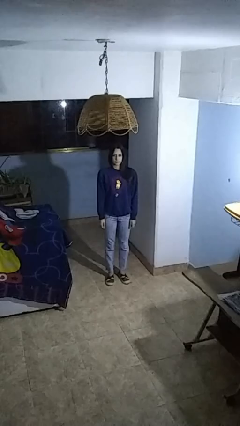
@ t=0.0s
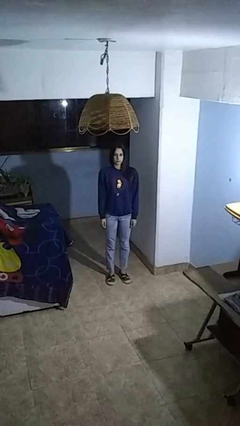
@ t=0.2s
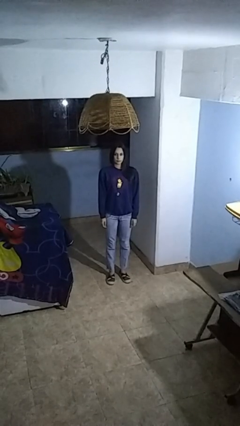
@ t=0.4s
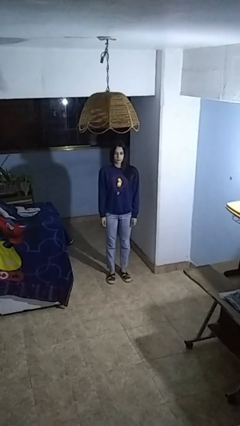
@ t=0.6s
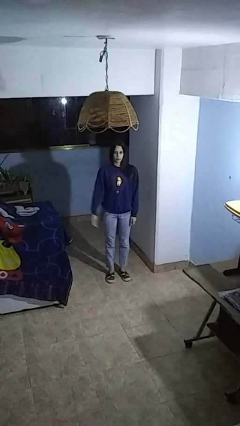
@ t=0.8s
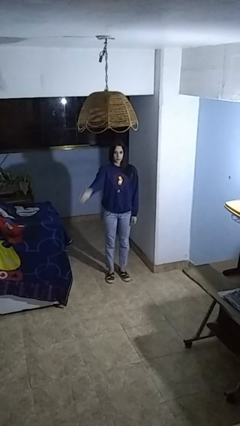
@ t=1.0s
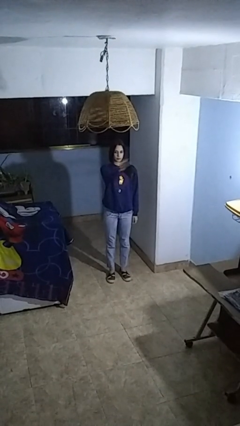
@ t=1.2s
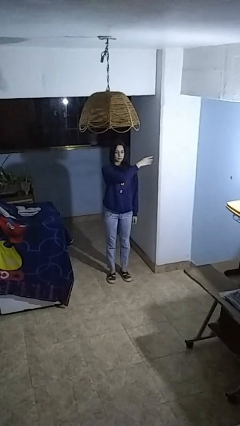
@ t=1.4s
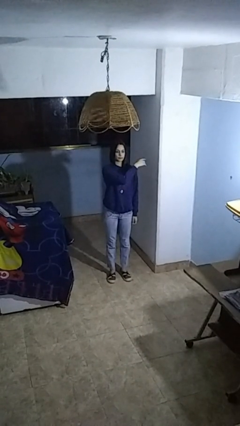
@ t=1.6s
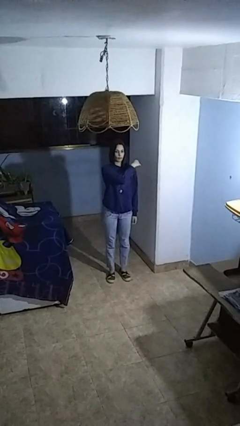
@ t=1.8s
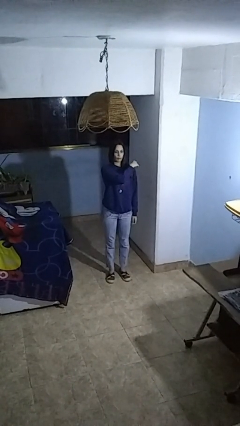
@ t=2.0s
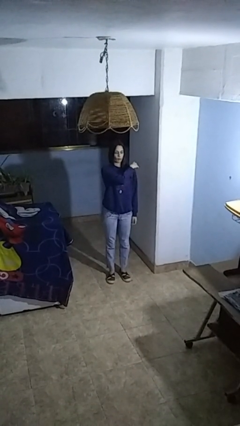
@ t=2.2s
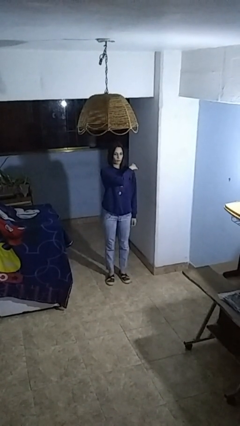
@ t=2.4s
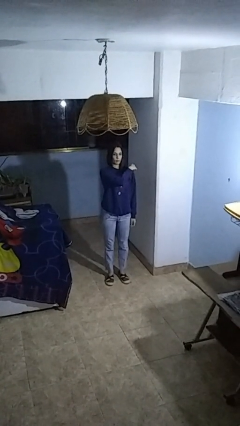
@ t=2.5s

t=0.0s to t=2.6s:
person gestures swipe left

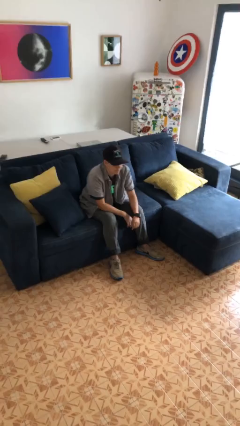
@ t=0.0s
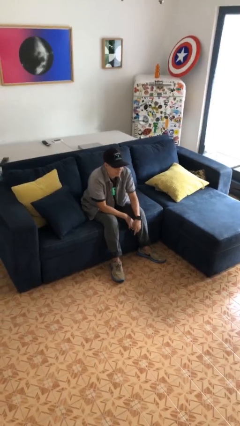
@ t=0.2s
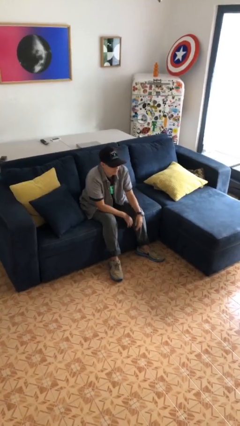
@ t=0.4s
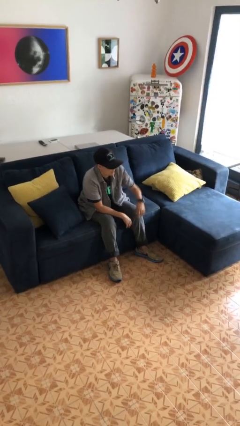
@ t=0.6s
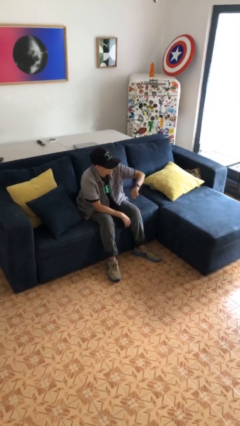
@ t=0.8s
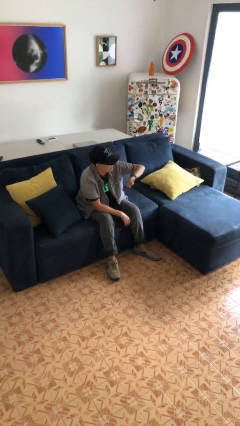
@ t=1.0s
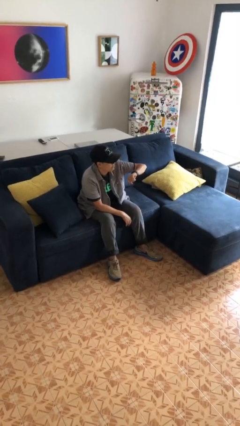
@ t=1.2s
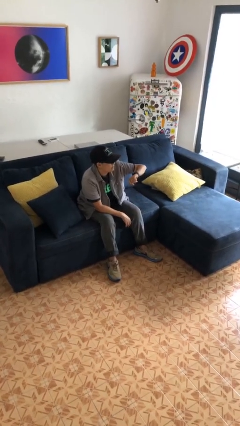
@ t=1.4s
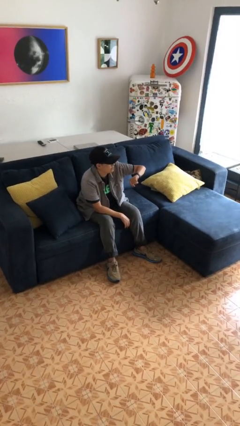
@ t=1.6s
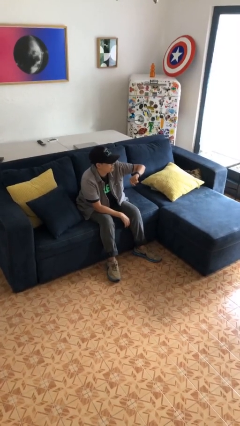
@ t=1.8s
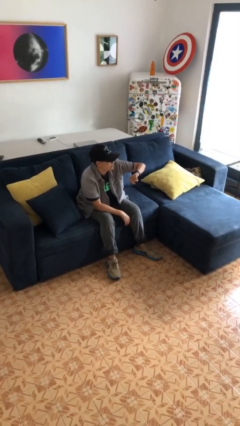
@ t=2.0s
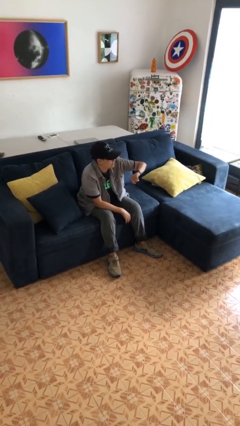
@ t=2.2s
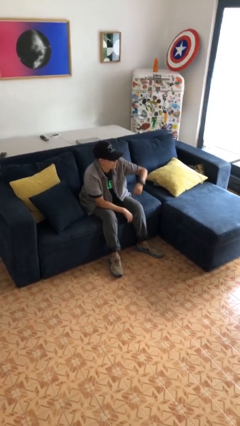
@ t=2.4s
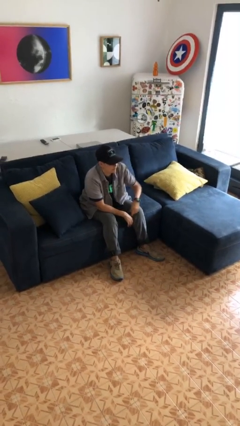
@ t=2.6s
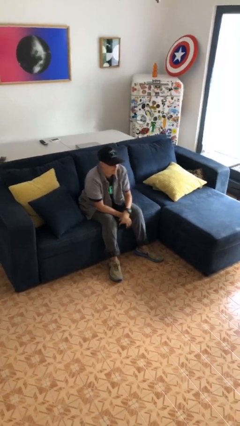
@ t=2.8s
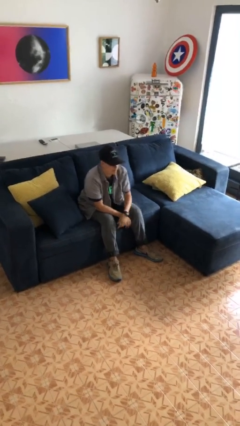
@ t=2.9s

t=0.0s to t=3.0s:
person looks at wristwatch

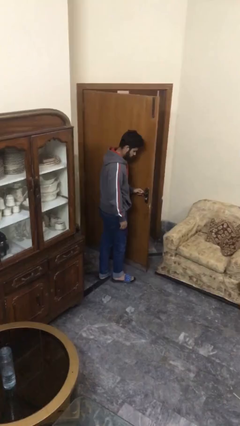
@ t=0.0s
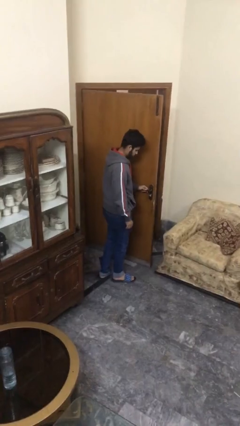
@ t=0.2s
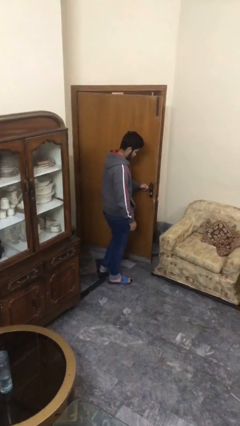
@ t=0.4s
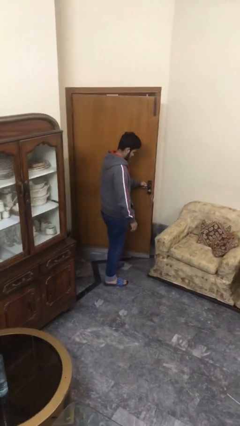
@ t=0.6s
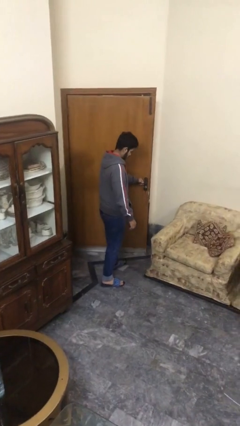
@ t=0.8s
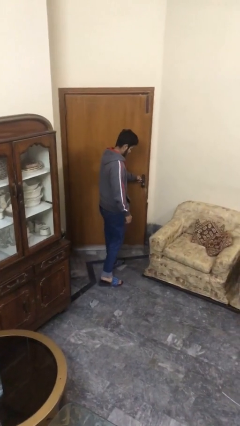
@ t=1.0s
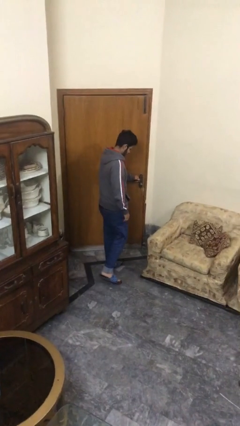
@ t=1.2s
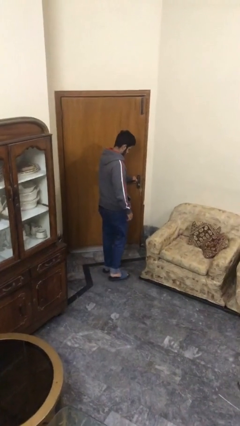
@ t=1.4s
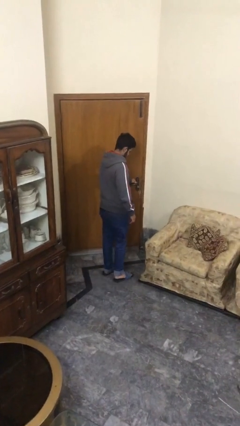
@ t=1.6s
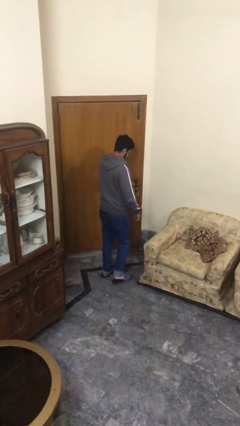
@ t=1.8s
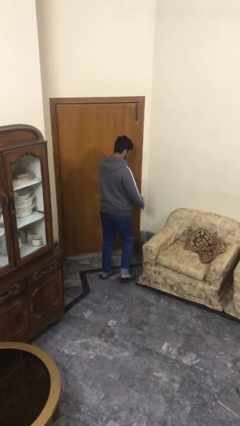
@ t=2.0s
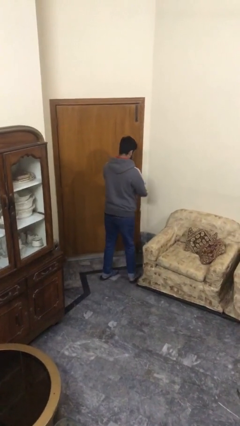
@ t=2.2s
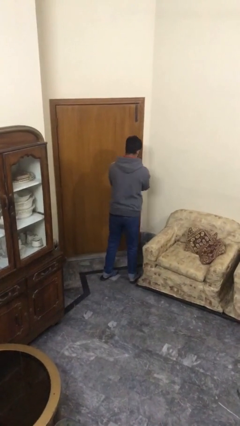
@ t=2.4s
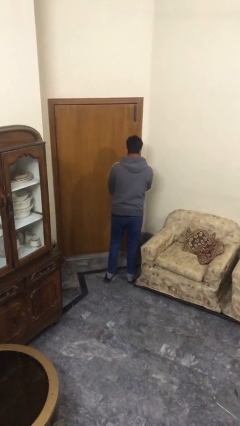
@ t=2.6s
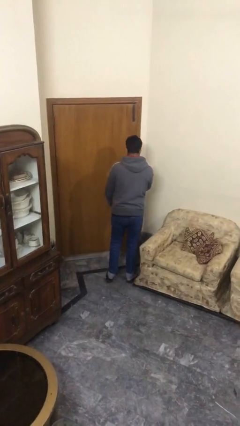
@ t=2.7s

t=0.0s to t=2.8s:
person closes facility door

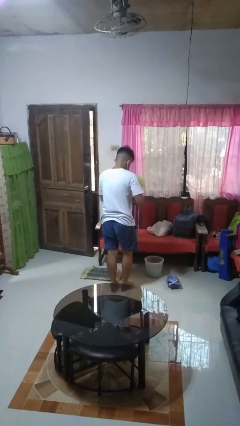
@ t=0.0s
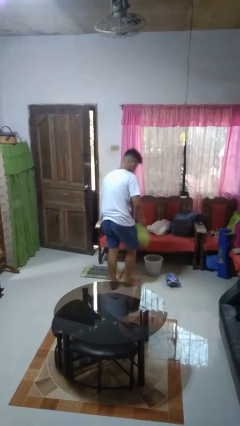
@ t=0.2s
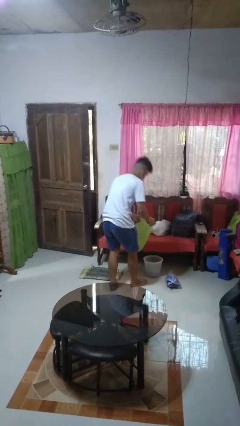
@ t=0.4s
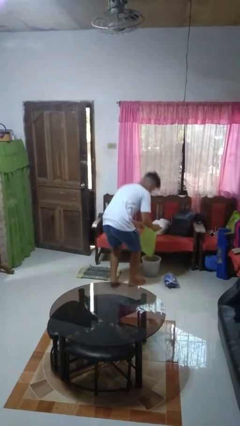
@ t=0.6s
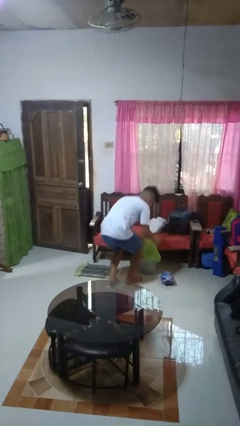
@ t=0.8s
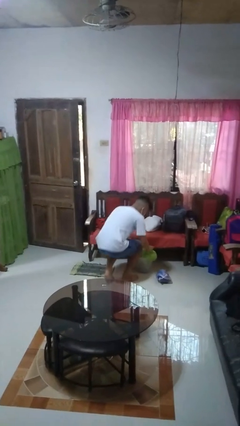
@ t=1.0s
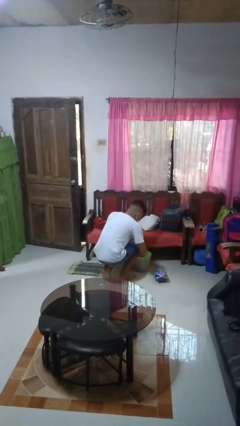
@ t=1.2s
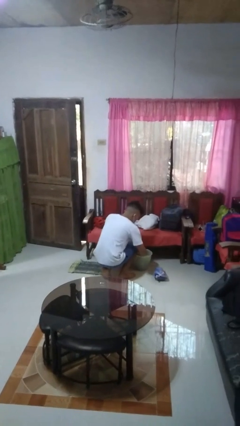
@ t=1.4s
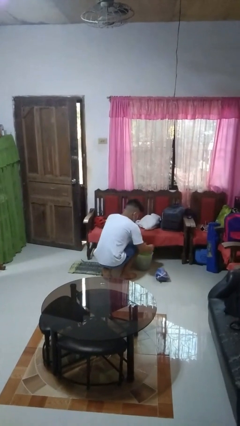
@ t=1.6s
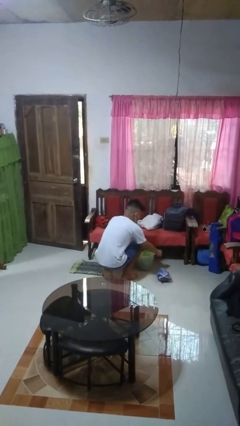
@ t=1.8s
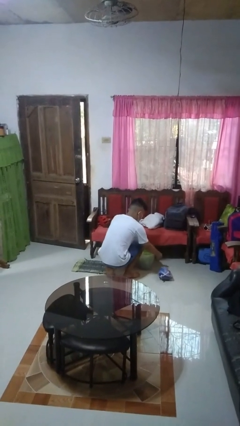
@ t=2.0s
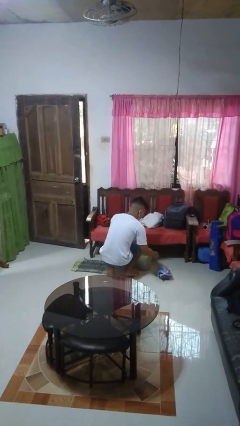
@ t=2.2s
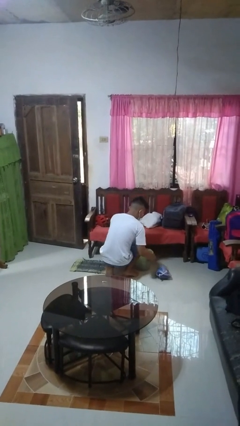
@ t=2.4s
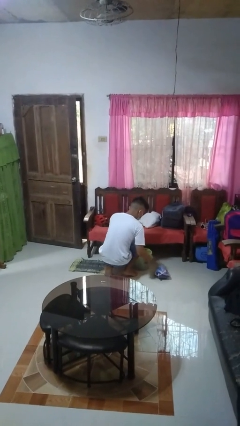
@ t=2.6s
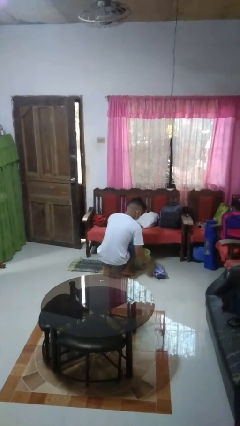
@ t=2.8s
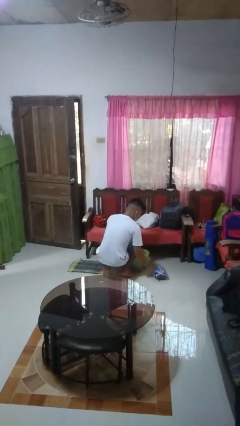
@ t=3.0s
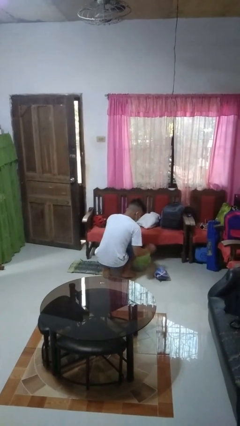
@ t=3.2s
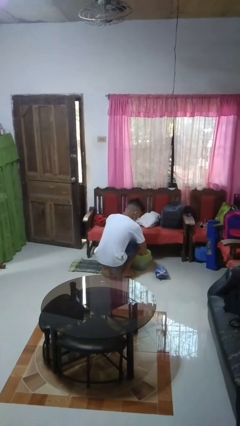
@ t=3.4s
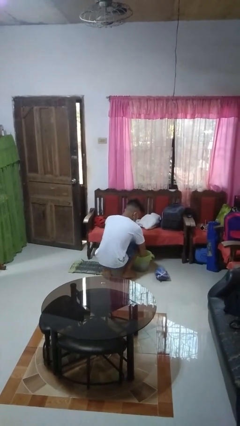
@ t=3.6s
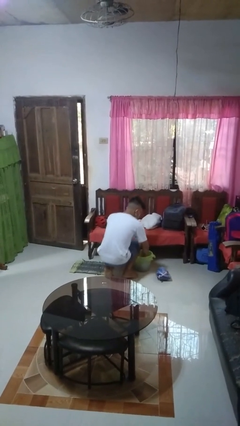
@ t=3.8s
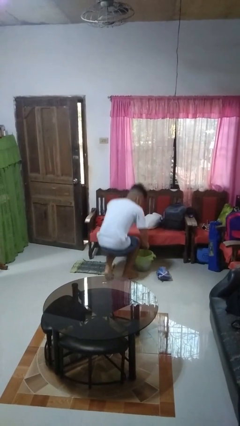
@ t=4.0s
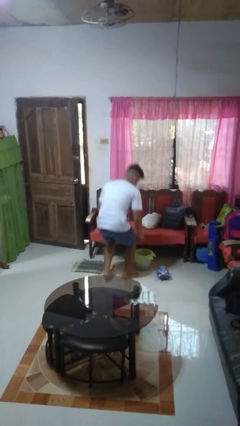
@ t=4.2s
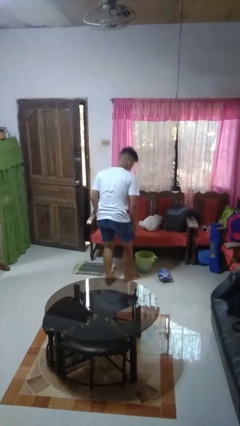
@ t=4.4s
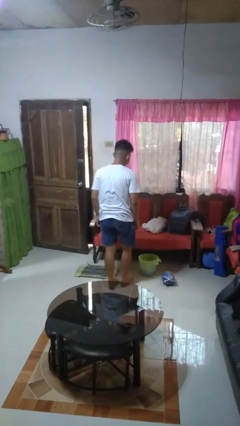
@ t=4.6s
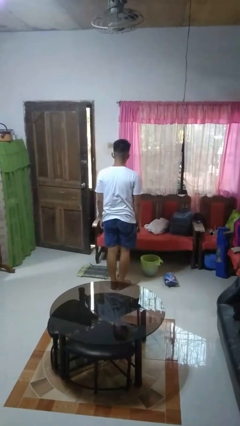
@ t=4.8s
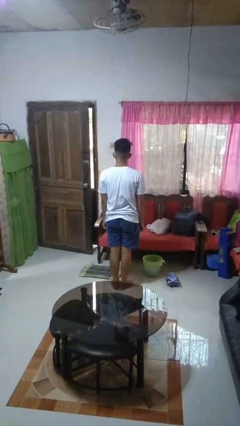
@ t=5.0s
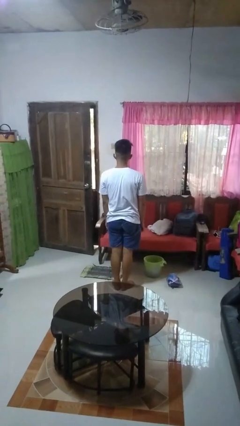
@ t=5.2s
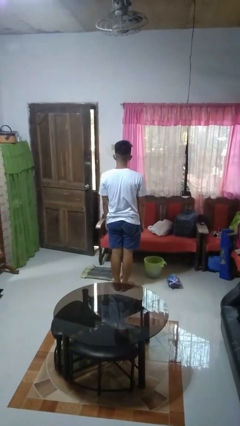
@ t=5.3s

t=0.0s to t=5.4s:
person inserts trashbag into trashcan

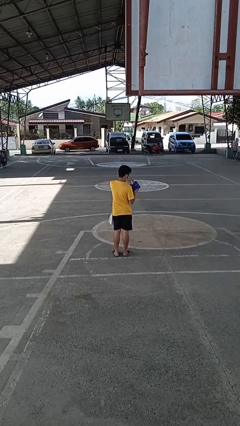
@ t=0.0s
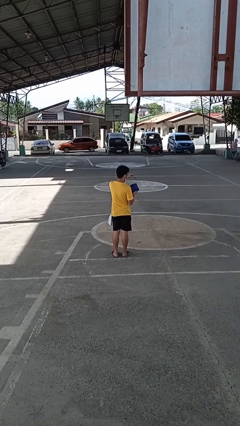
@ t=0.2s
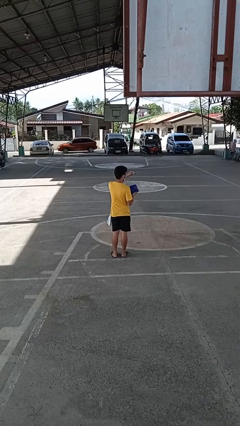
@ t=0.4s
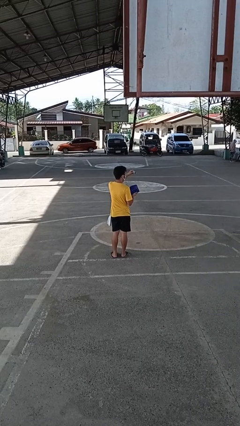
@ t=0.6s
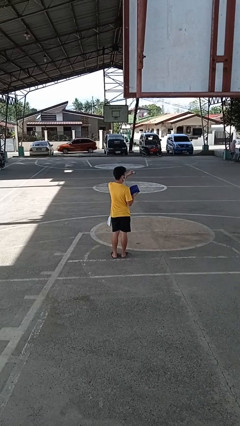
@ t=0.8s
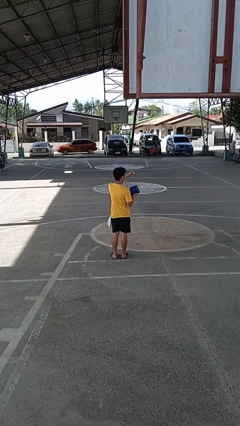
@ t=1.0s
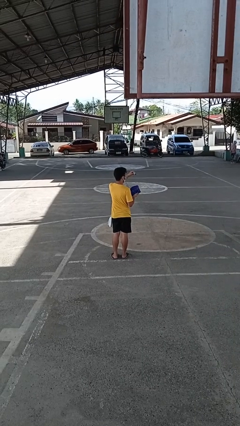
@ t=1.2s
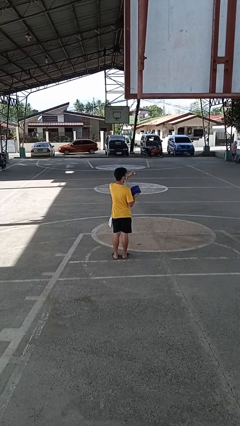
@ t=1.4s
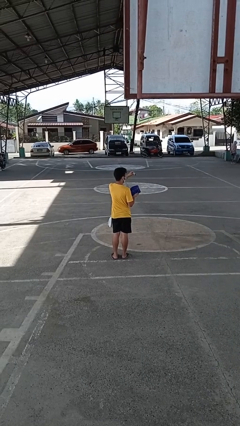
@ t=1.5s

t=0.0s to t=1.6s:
person takes object from purse

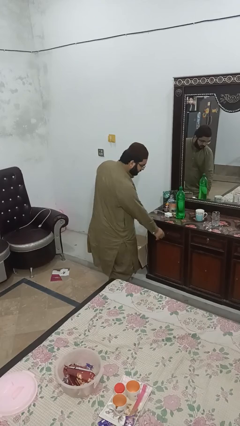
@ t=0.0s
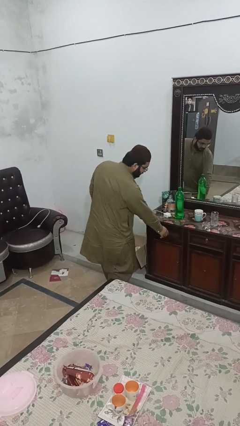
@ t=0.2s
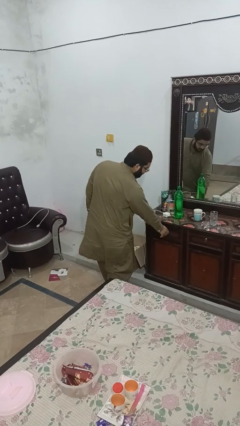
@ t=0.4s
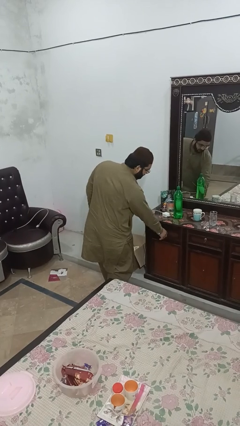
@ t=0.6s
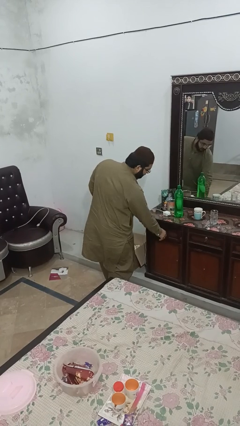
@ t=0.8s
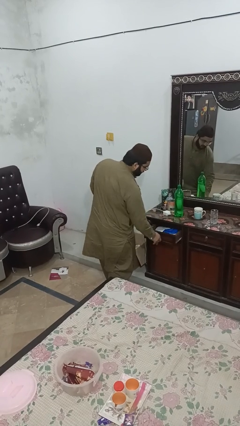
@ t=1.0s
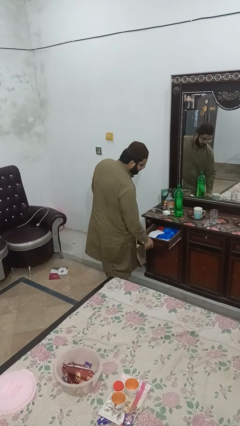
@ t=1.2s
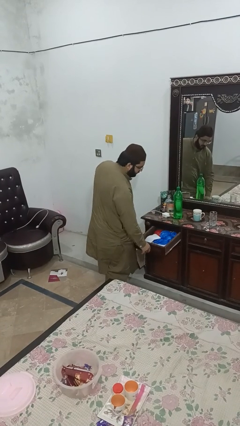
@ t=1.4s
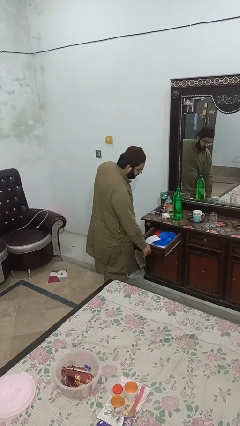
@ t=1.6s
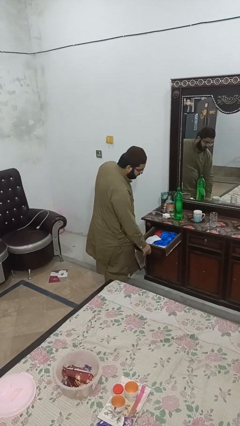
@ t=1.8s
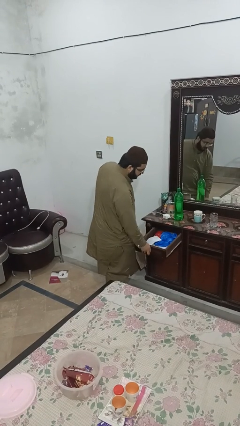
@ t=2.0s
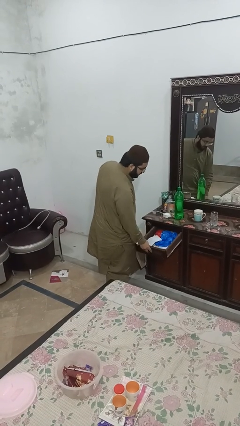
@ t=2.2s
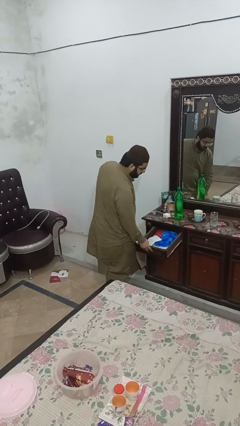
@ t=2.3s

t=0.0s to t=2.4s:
person opens dresser drawer
